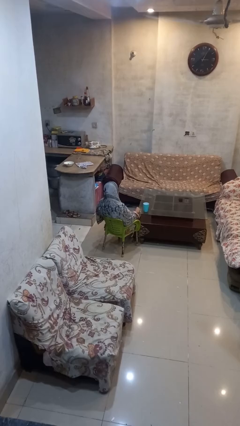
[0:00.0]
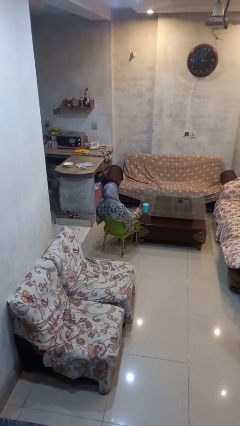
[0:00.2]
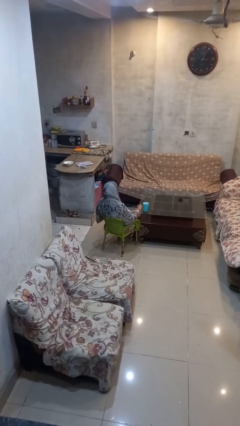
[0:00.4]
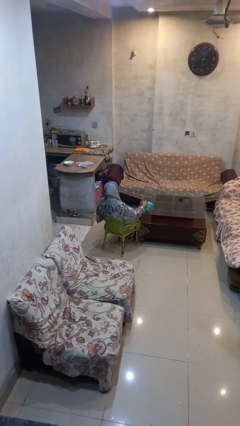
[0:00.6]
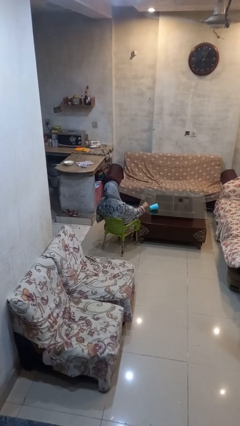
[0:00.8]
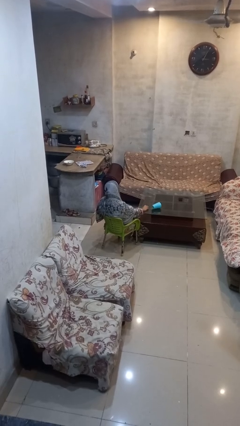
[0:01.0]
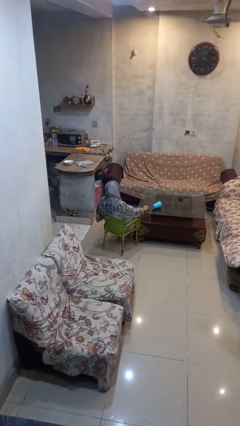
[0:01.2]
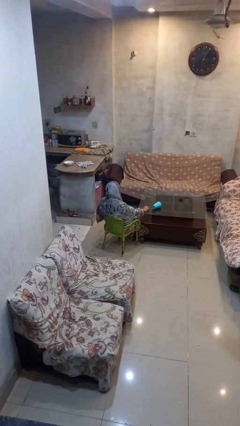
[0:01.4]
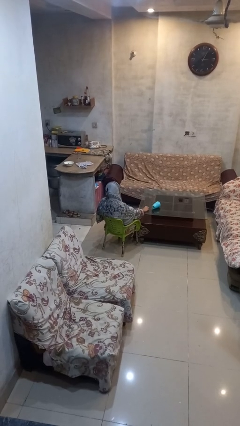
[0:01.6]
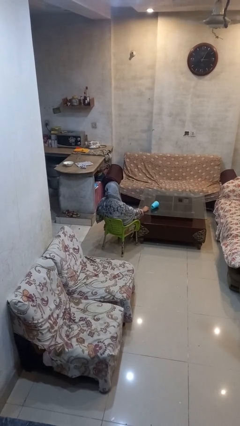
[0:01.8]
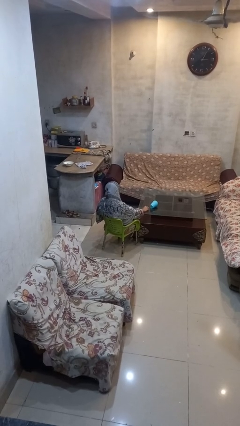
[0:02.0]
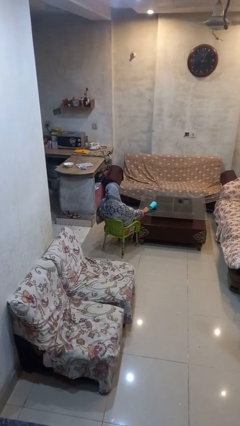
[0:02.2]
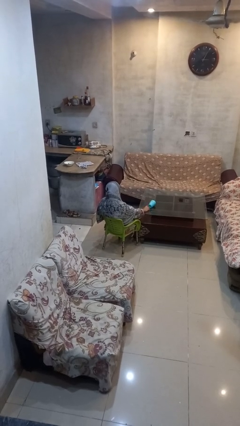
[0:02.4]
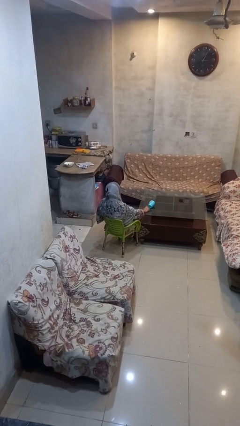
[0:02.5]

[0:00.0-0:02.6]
person knocks over glass

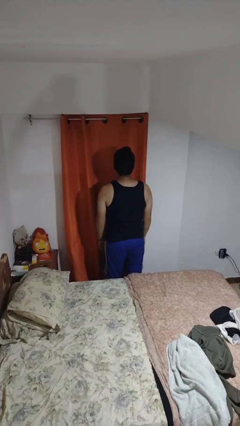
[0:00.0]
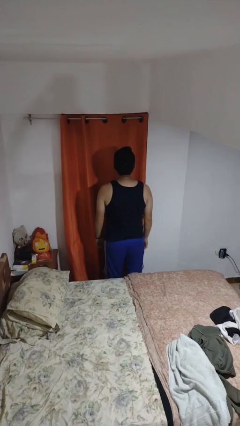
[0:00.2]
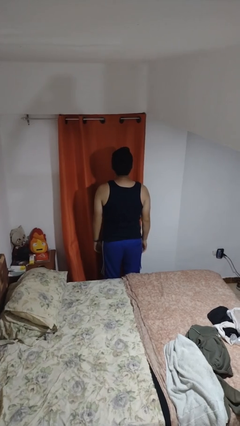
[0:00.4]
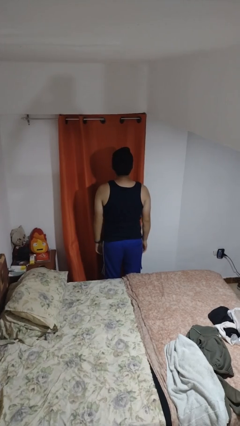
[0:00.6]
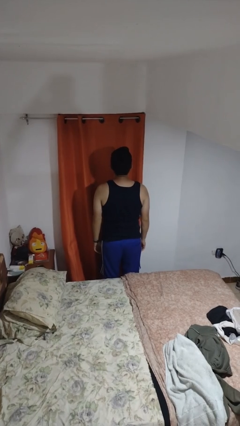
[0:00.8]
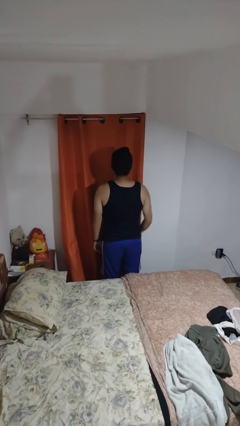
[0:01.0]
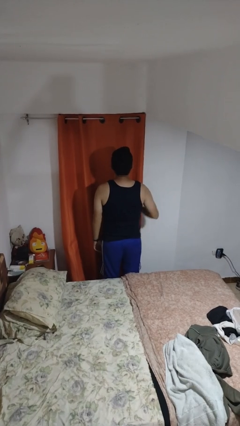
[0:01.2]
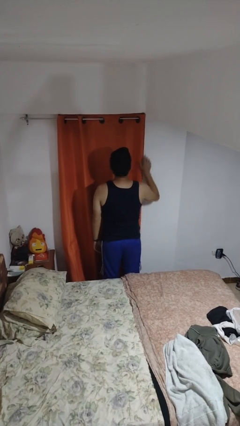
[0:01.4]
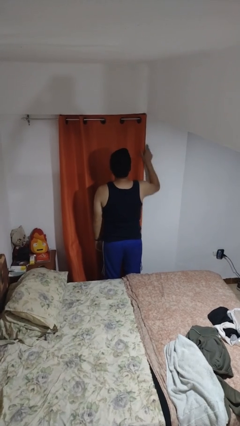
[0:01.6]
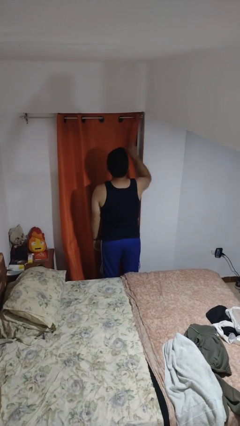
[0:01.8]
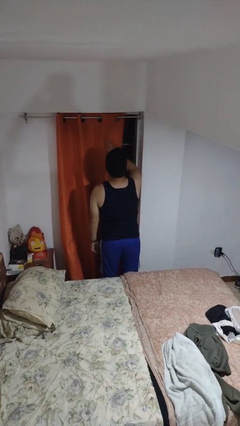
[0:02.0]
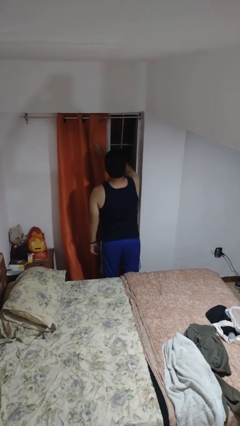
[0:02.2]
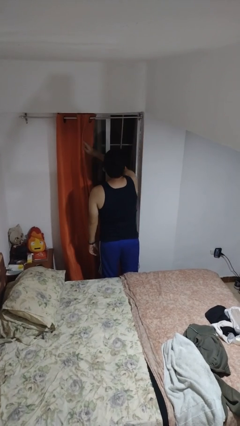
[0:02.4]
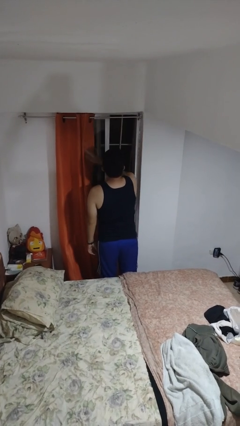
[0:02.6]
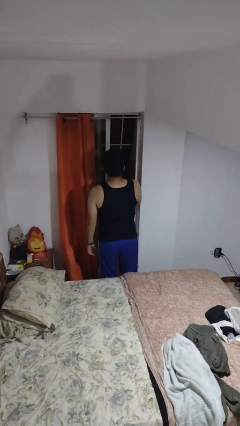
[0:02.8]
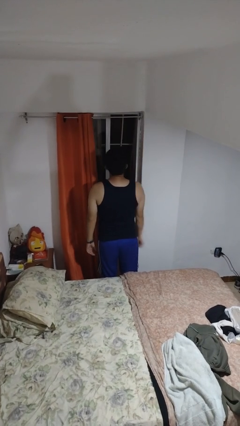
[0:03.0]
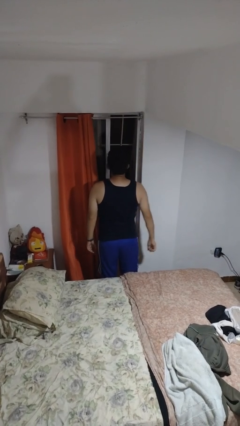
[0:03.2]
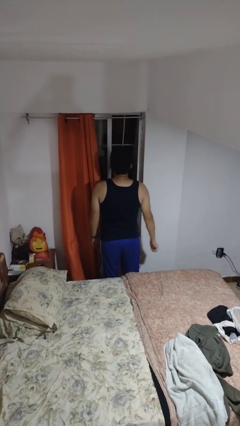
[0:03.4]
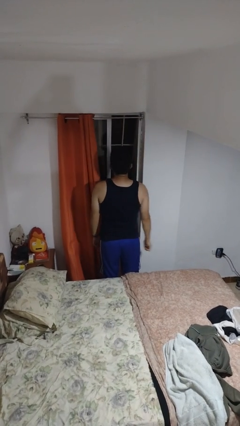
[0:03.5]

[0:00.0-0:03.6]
person opens curtains

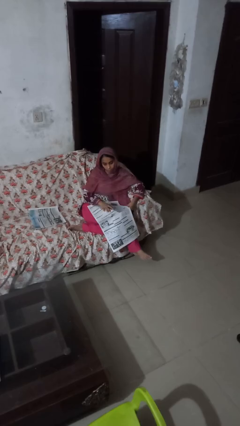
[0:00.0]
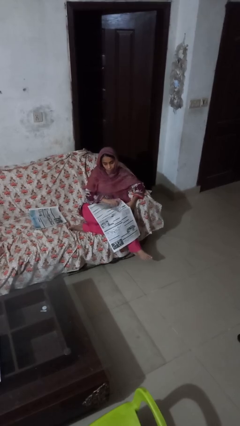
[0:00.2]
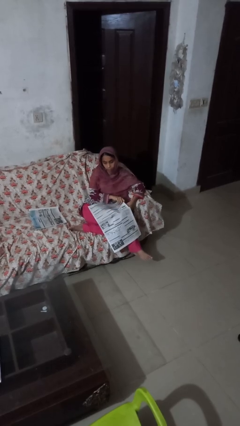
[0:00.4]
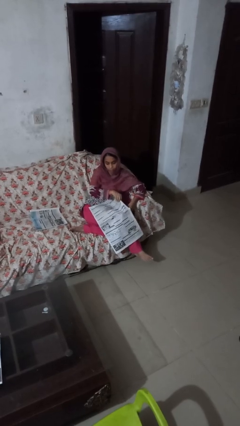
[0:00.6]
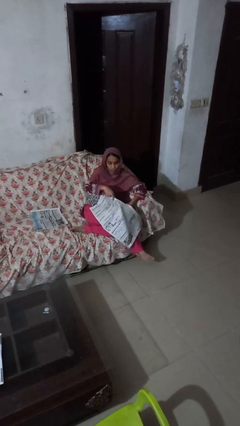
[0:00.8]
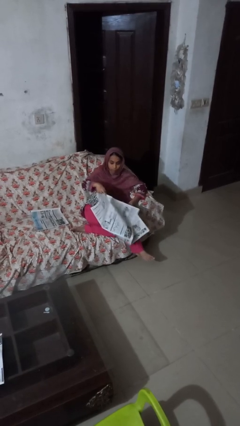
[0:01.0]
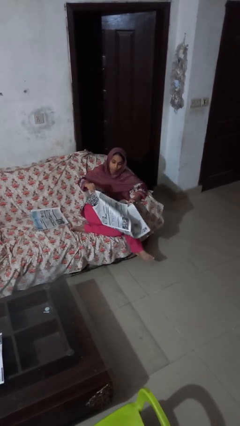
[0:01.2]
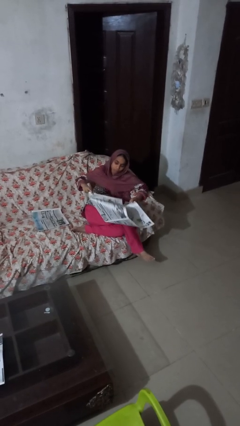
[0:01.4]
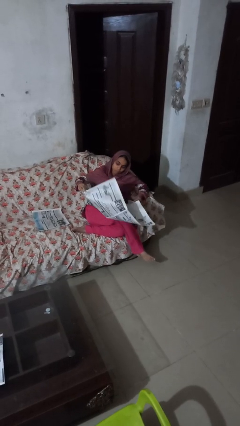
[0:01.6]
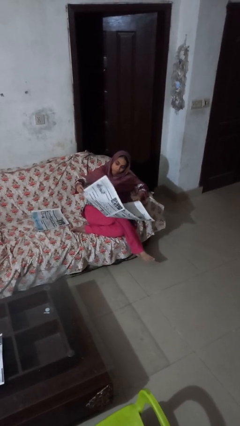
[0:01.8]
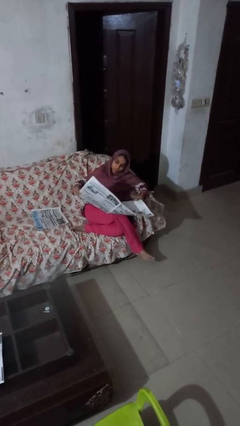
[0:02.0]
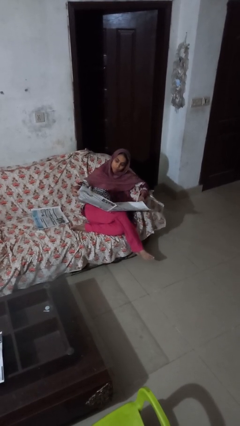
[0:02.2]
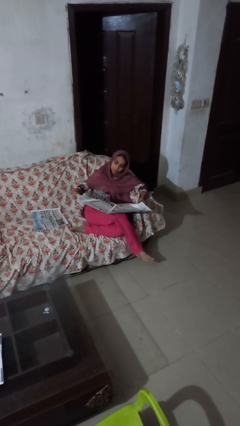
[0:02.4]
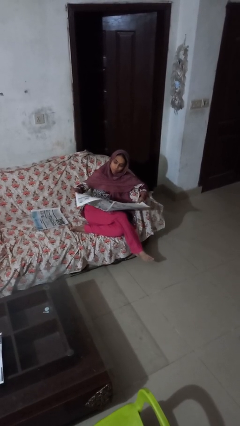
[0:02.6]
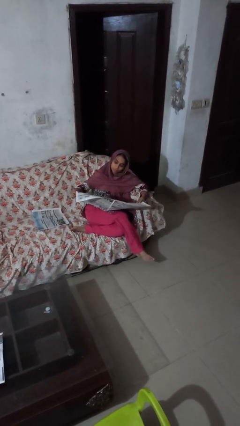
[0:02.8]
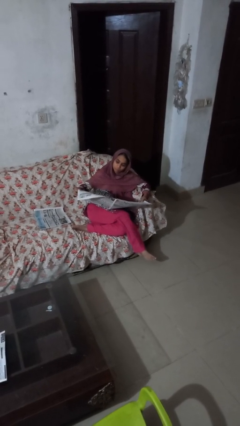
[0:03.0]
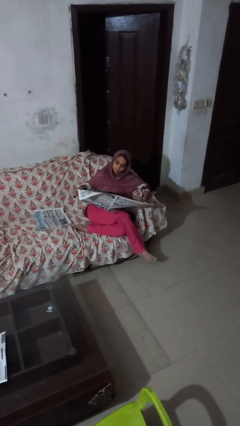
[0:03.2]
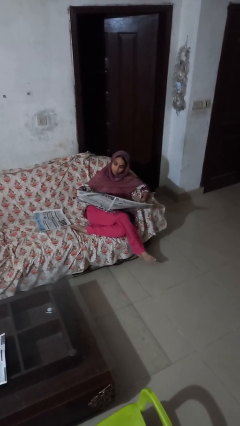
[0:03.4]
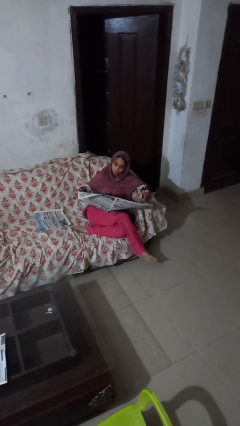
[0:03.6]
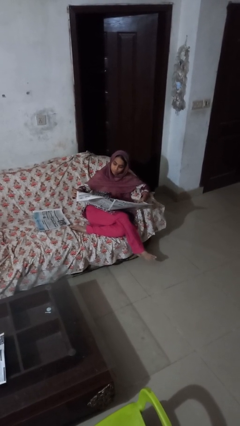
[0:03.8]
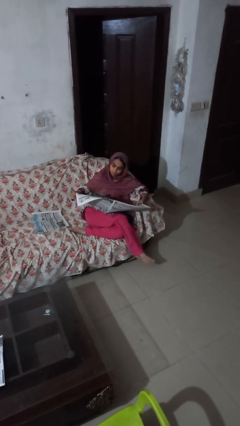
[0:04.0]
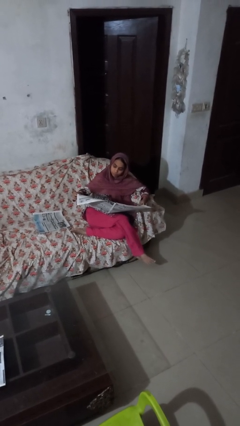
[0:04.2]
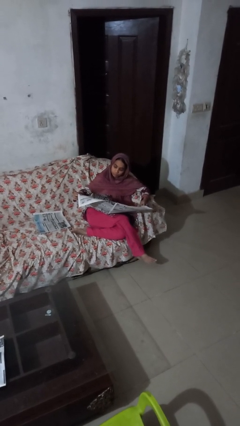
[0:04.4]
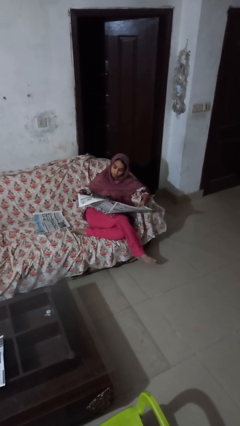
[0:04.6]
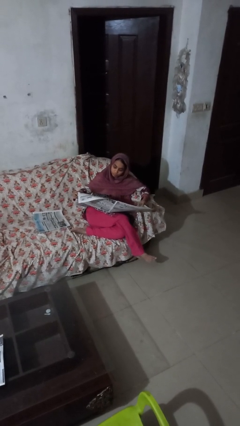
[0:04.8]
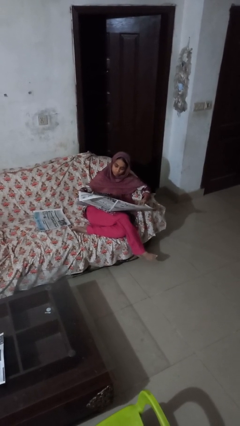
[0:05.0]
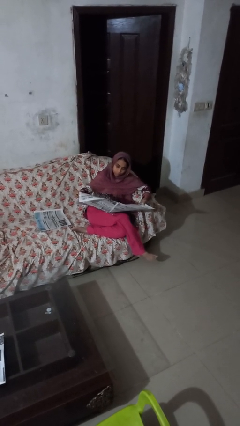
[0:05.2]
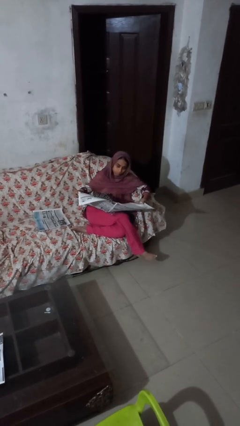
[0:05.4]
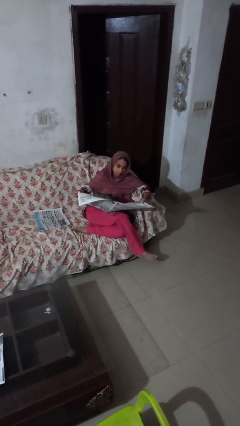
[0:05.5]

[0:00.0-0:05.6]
person reads newspaper

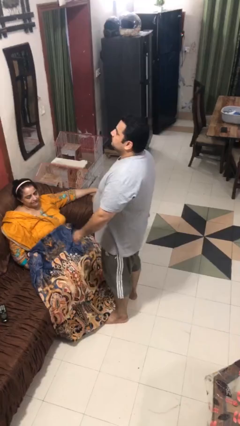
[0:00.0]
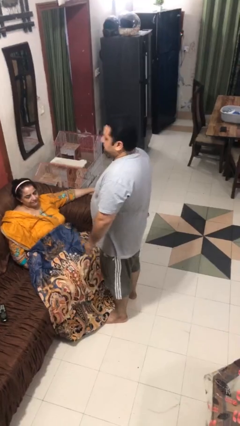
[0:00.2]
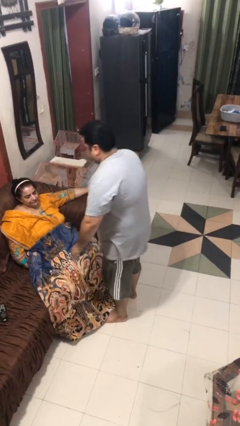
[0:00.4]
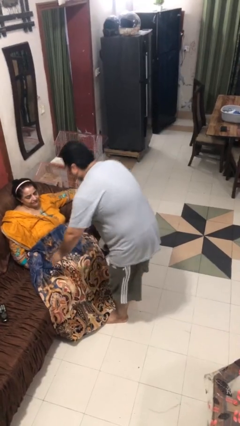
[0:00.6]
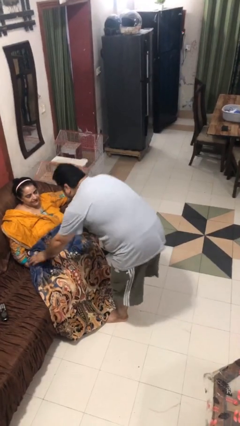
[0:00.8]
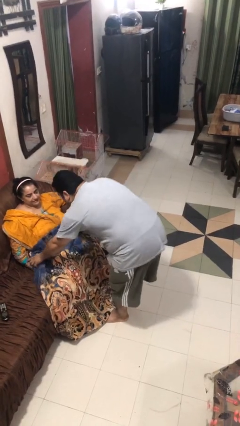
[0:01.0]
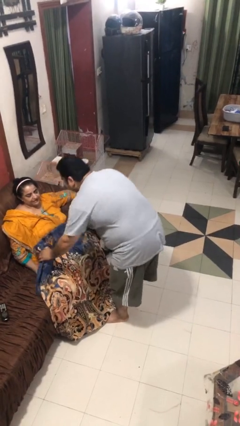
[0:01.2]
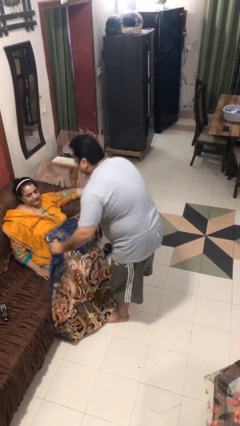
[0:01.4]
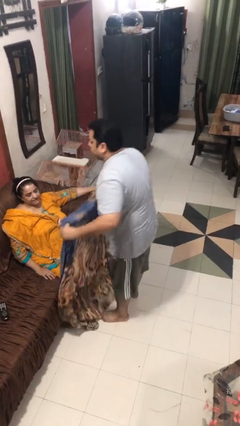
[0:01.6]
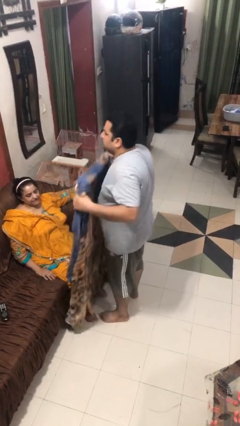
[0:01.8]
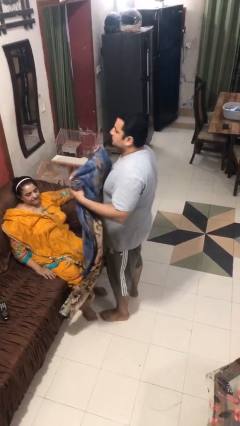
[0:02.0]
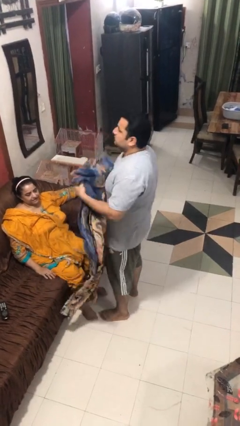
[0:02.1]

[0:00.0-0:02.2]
person uncovers friend with blanket

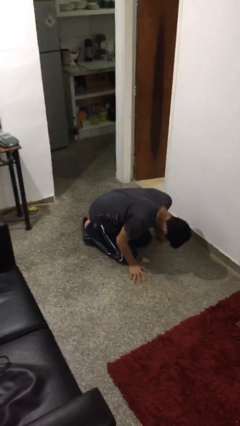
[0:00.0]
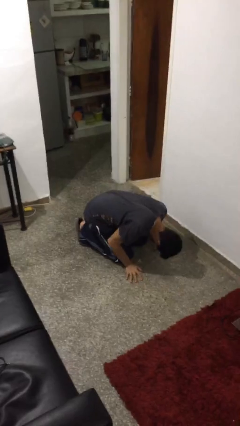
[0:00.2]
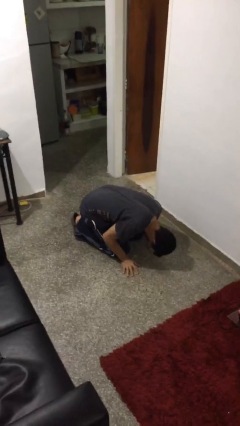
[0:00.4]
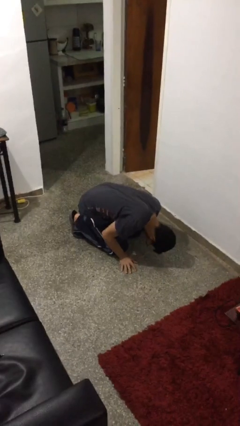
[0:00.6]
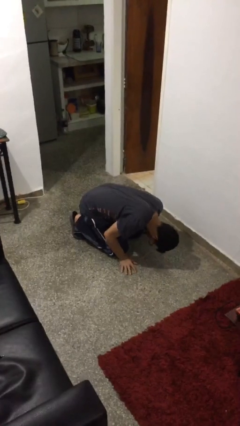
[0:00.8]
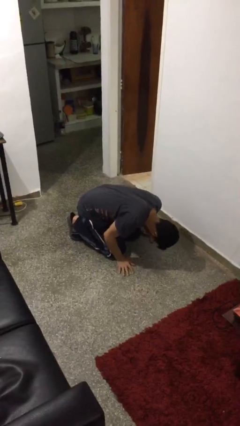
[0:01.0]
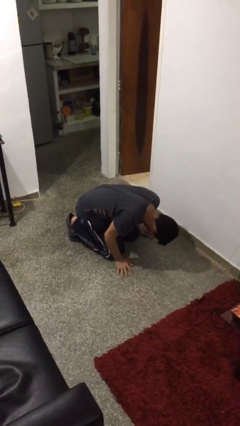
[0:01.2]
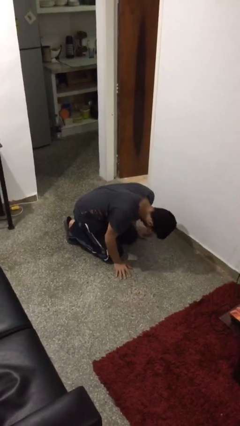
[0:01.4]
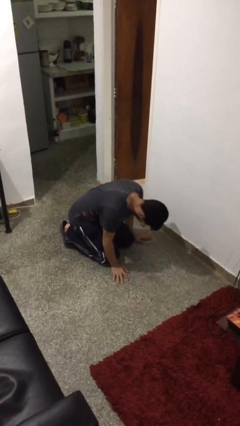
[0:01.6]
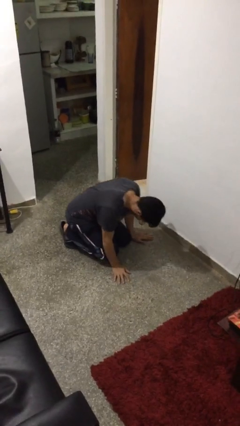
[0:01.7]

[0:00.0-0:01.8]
person lies down on floor

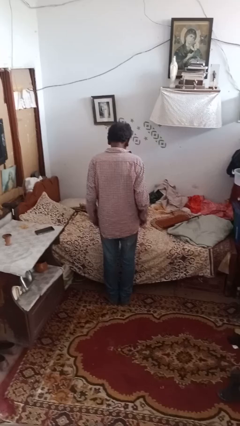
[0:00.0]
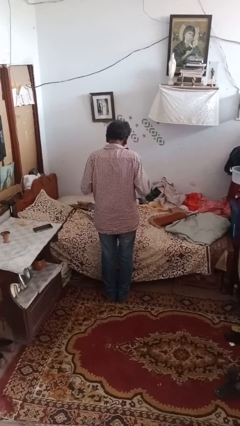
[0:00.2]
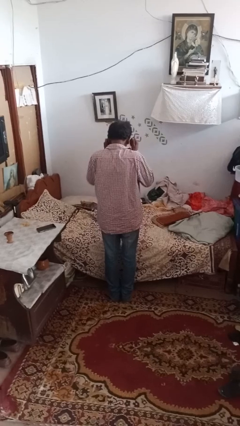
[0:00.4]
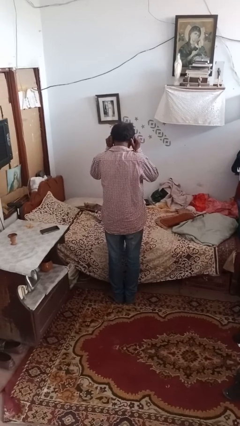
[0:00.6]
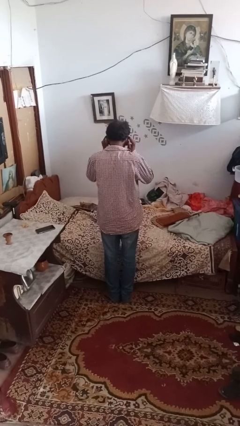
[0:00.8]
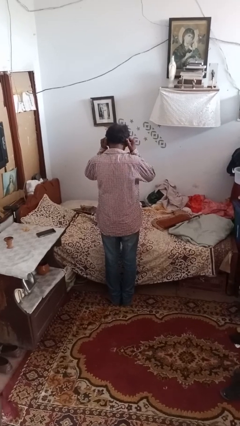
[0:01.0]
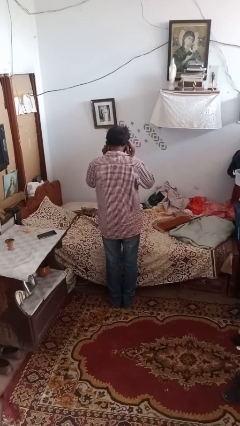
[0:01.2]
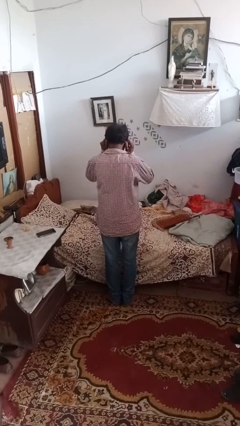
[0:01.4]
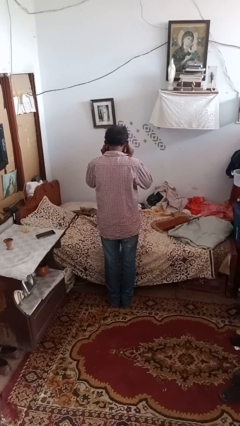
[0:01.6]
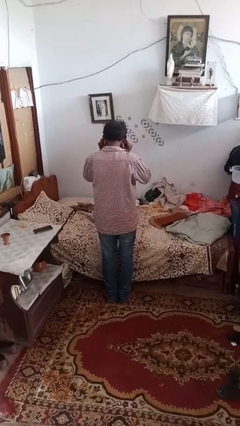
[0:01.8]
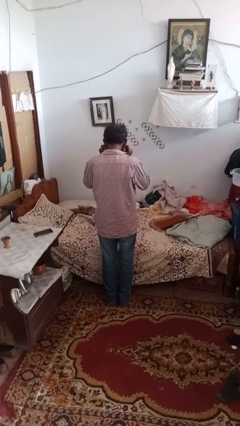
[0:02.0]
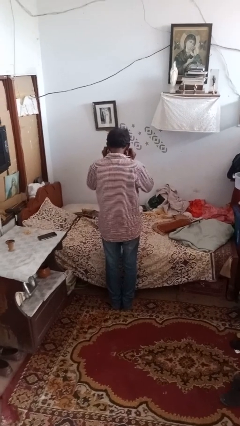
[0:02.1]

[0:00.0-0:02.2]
person touches earlobe
